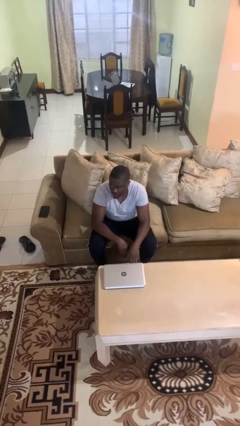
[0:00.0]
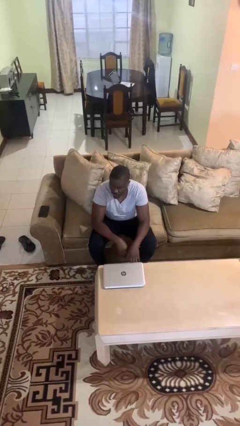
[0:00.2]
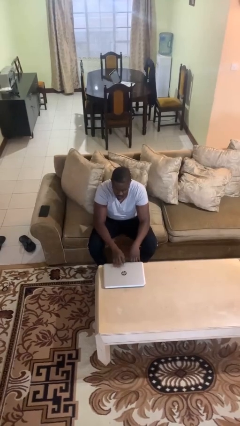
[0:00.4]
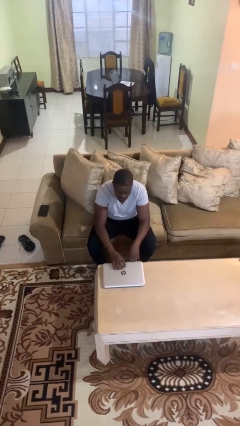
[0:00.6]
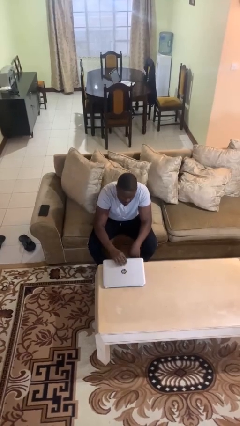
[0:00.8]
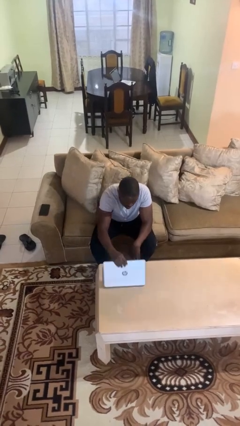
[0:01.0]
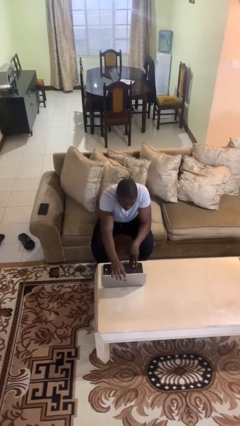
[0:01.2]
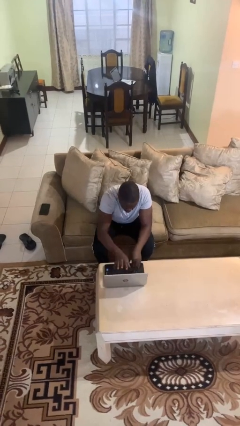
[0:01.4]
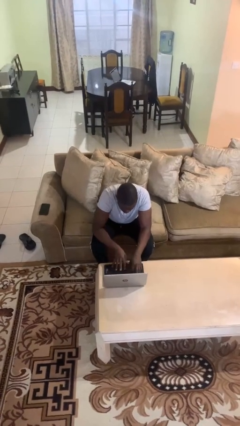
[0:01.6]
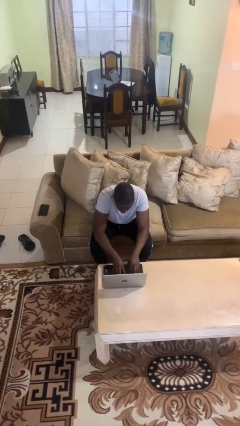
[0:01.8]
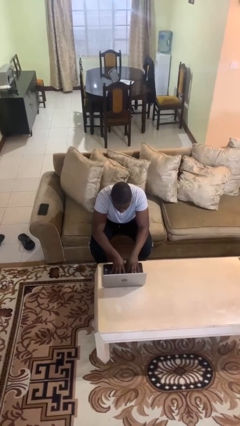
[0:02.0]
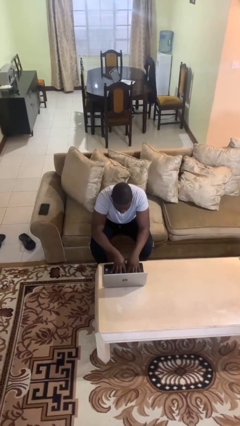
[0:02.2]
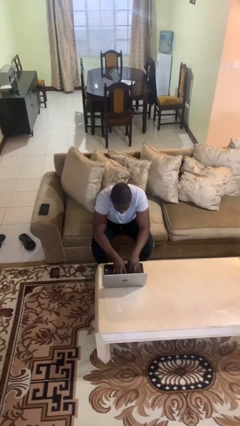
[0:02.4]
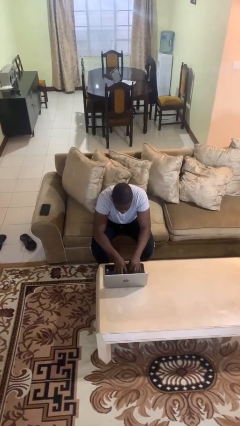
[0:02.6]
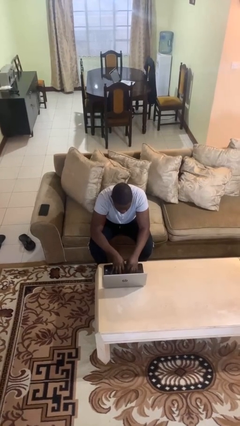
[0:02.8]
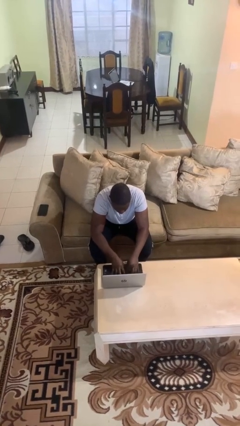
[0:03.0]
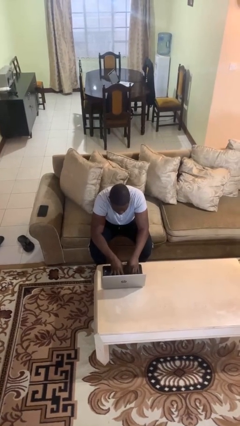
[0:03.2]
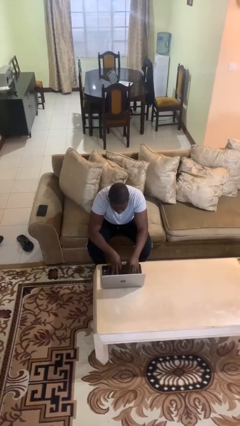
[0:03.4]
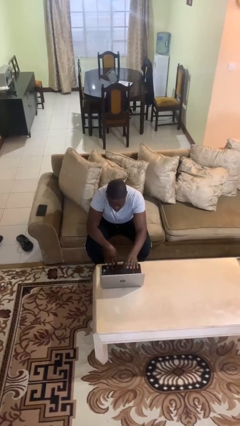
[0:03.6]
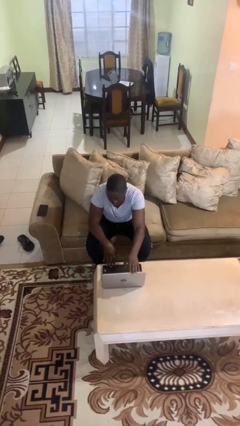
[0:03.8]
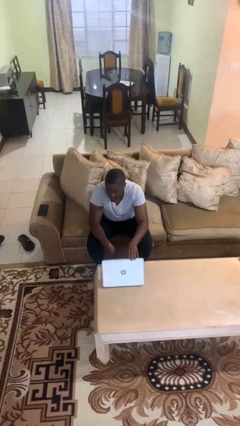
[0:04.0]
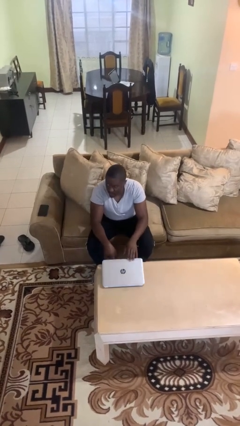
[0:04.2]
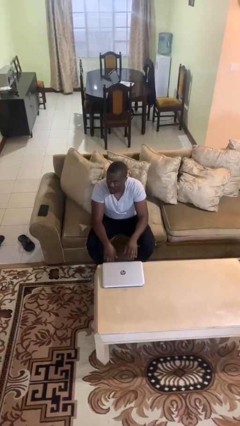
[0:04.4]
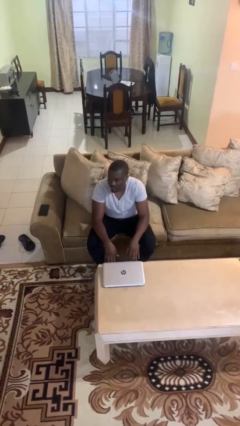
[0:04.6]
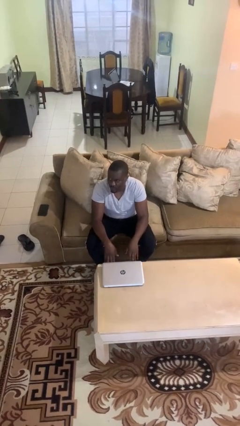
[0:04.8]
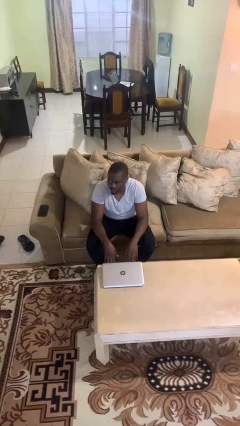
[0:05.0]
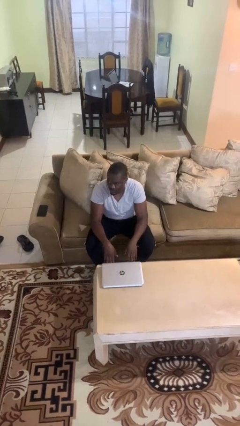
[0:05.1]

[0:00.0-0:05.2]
person interacts with laptop

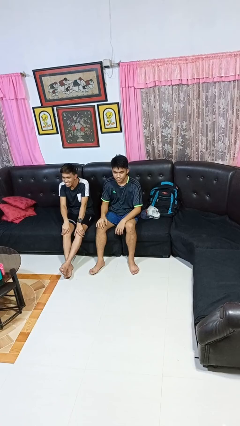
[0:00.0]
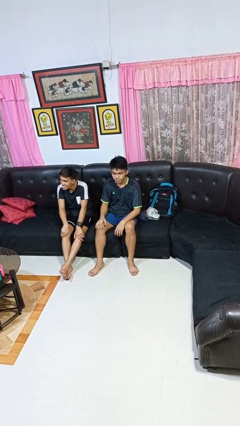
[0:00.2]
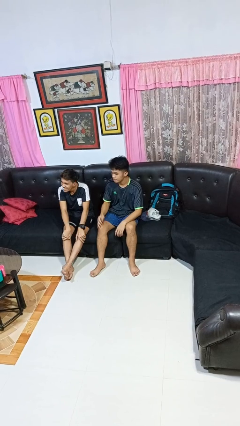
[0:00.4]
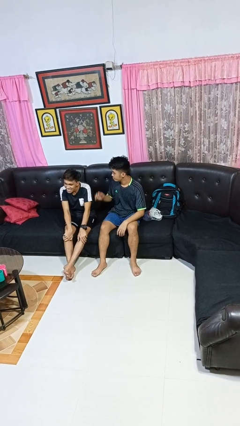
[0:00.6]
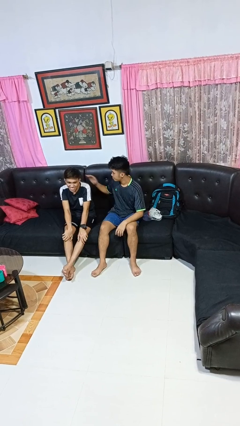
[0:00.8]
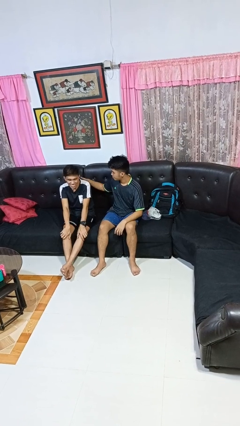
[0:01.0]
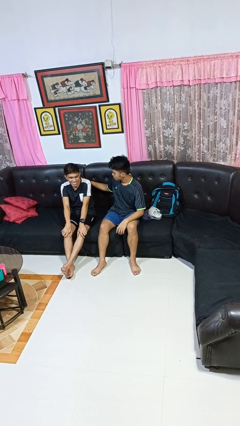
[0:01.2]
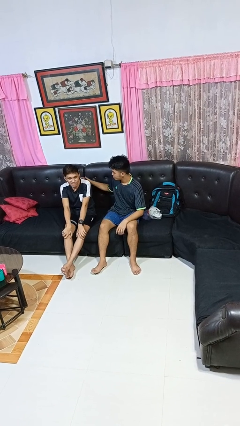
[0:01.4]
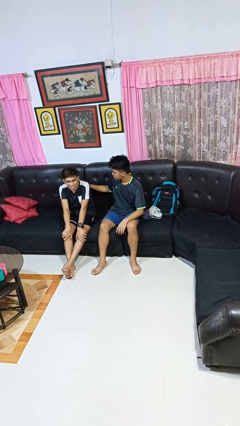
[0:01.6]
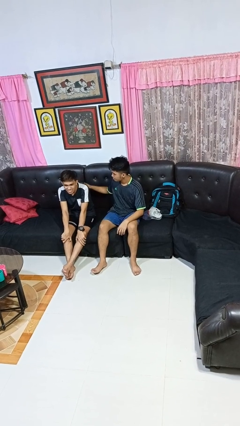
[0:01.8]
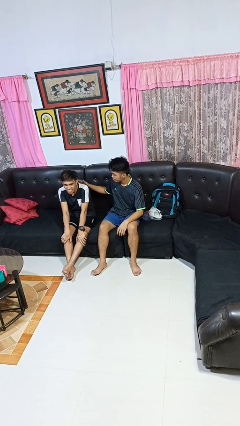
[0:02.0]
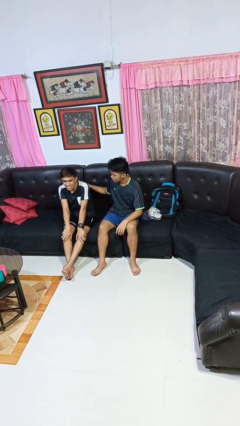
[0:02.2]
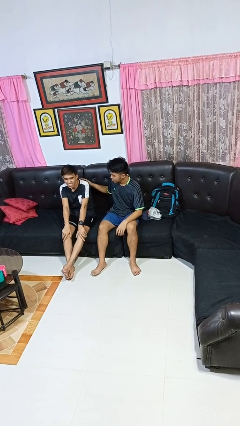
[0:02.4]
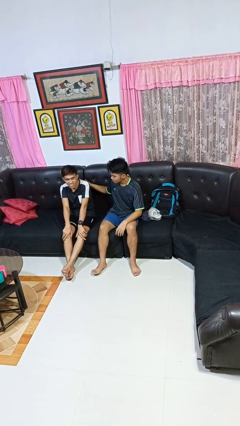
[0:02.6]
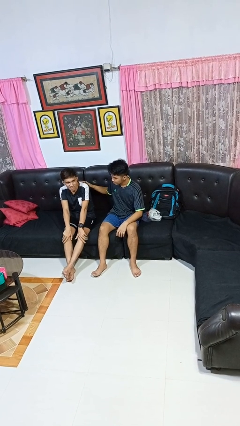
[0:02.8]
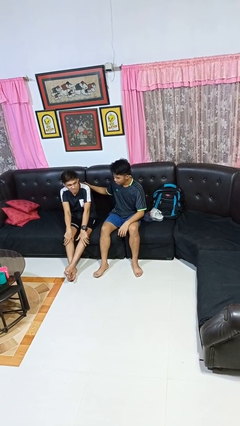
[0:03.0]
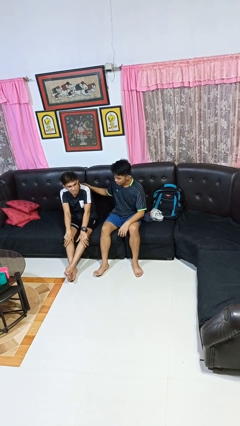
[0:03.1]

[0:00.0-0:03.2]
person touches back of person

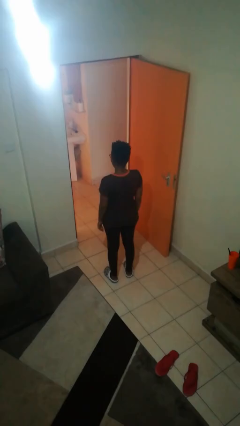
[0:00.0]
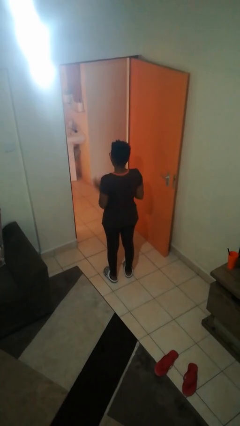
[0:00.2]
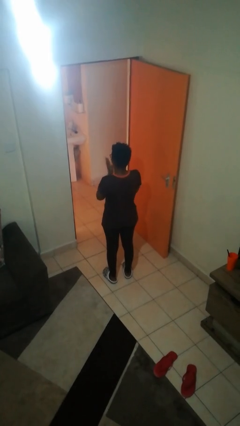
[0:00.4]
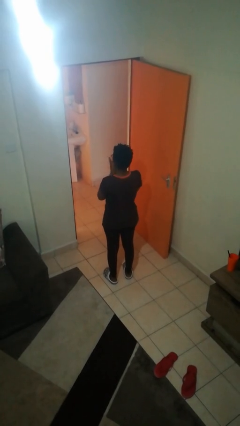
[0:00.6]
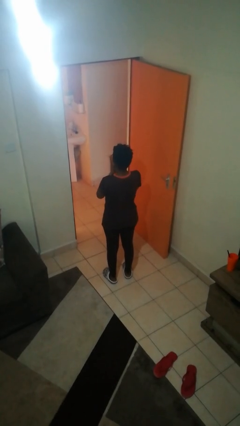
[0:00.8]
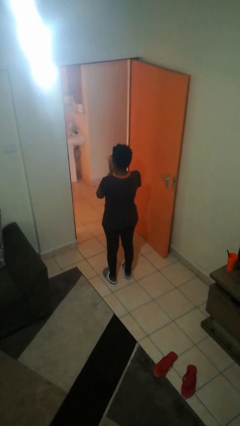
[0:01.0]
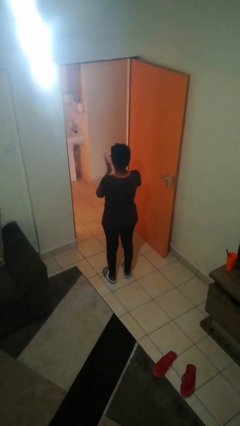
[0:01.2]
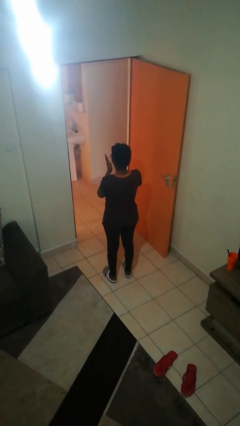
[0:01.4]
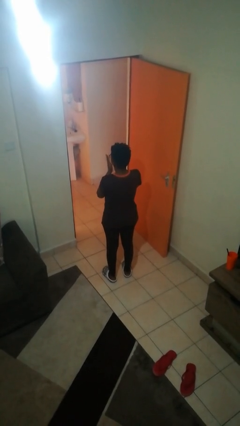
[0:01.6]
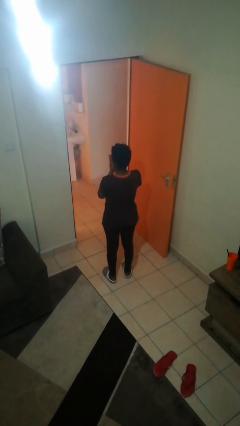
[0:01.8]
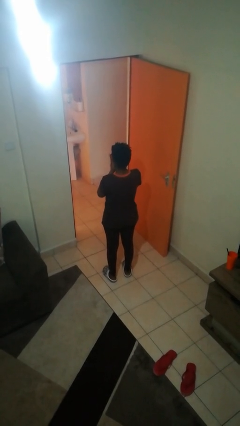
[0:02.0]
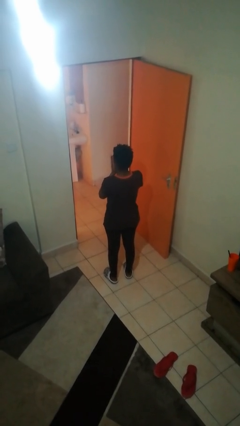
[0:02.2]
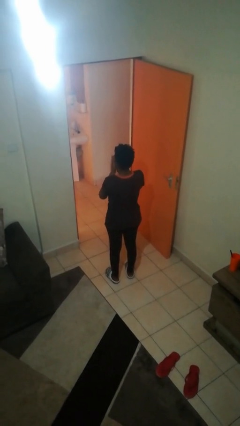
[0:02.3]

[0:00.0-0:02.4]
person claps hands

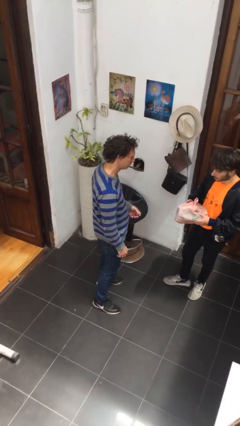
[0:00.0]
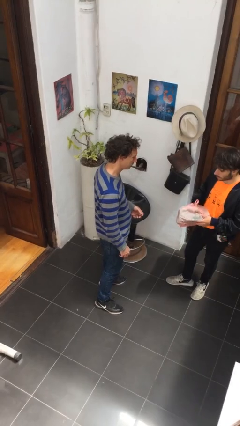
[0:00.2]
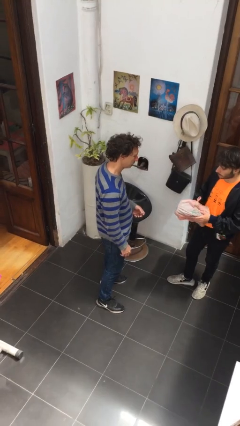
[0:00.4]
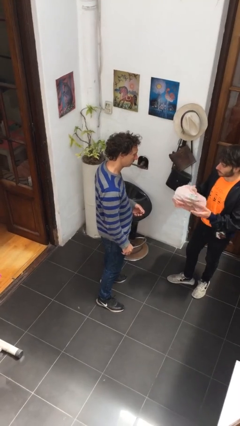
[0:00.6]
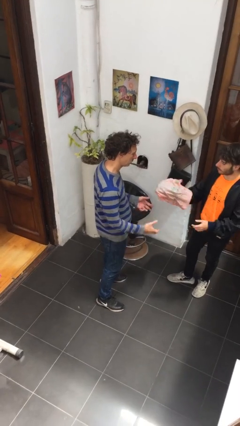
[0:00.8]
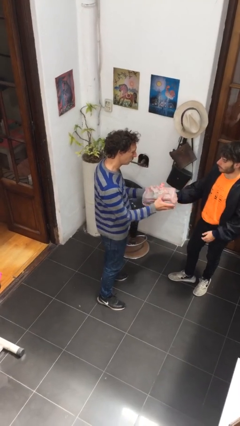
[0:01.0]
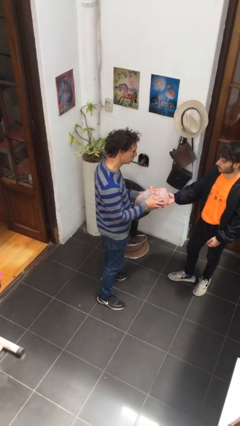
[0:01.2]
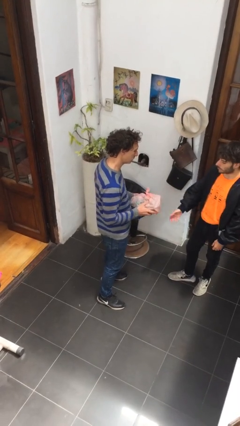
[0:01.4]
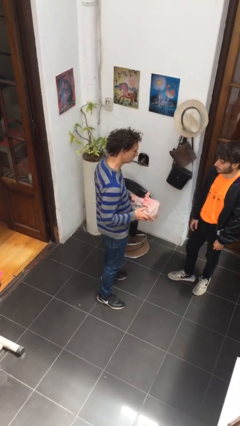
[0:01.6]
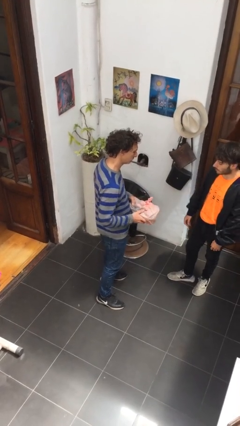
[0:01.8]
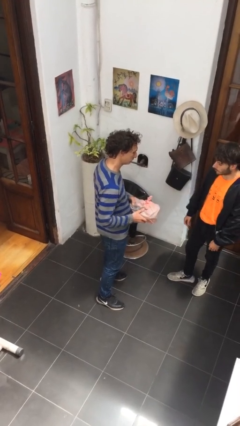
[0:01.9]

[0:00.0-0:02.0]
person transfers object to person

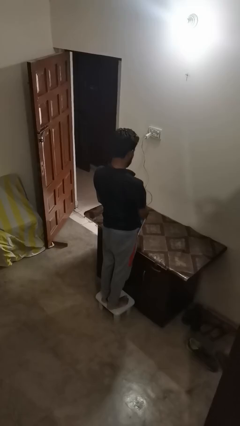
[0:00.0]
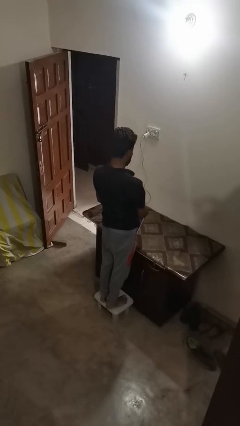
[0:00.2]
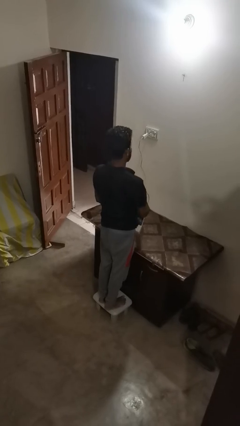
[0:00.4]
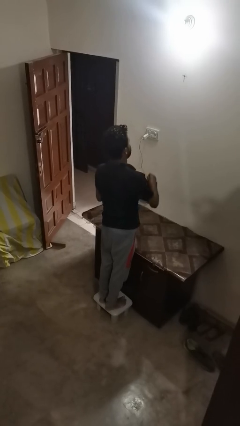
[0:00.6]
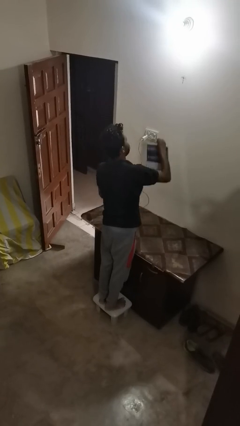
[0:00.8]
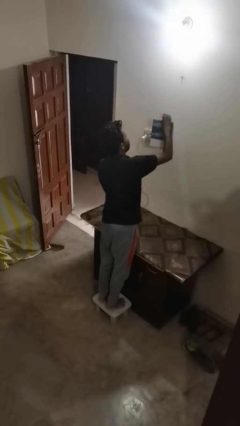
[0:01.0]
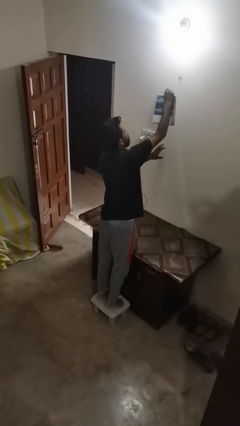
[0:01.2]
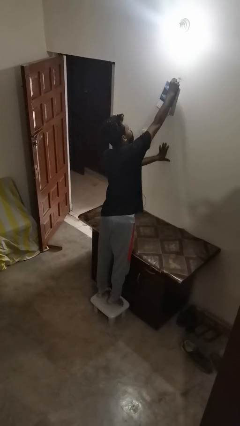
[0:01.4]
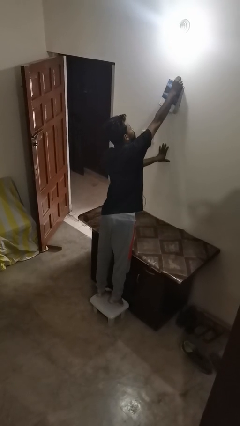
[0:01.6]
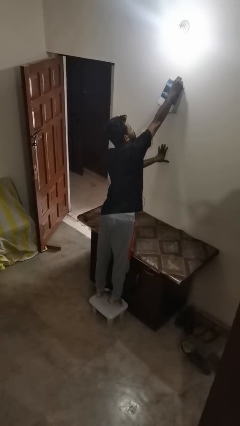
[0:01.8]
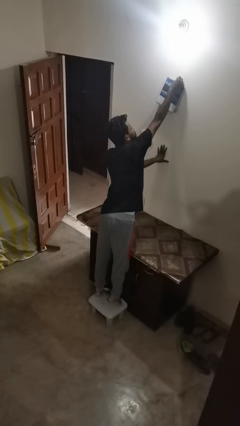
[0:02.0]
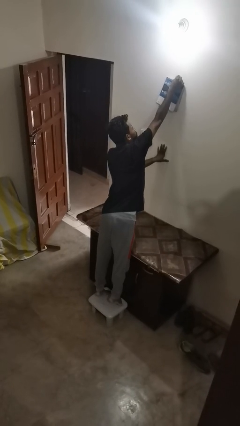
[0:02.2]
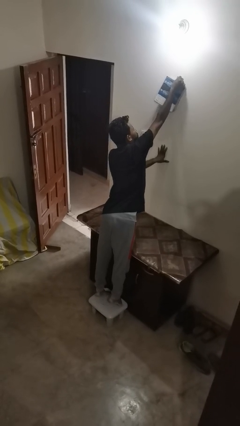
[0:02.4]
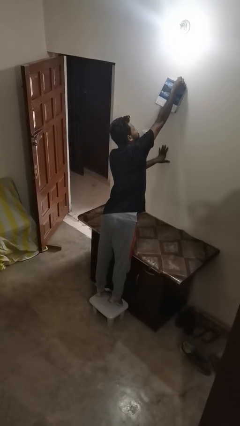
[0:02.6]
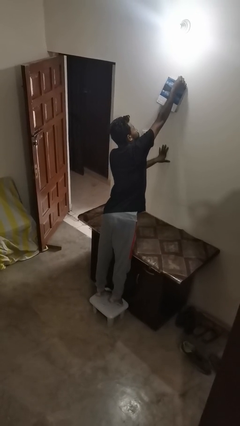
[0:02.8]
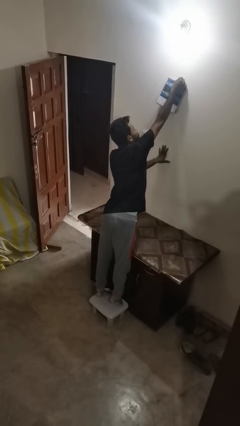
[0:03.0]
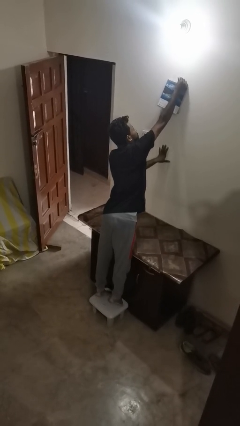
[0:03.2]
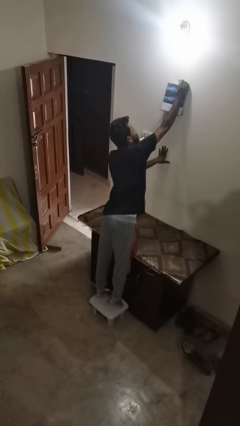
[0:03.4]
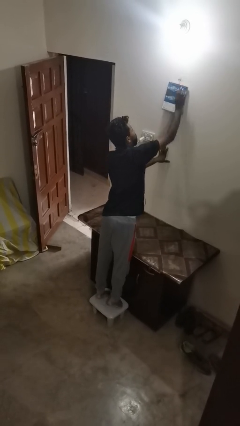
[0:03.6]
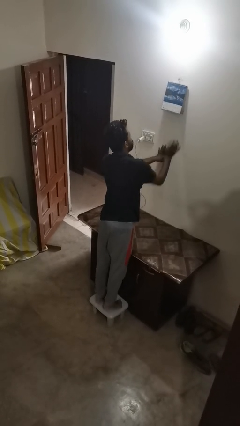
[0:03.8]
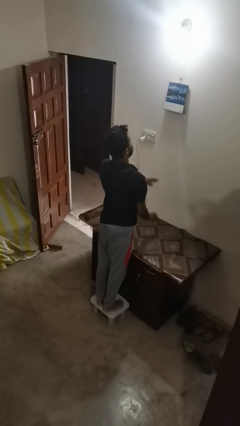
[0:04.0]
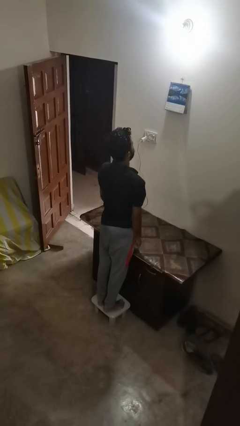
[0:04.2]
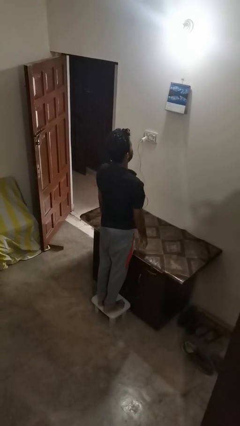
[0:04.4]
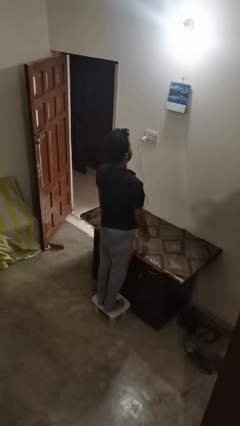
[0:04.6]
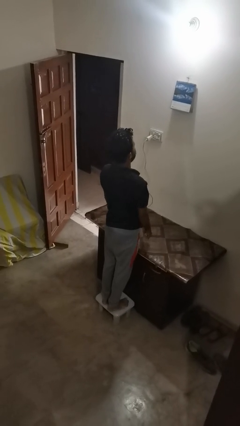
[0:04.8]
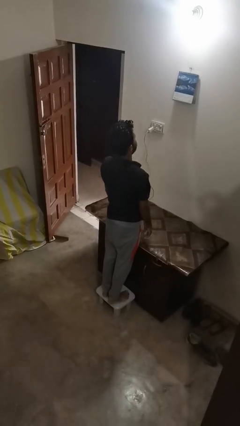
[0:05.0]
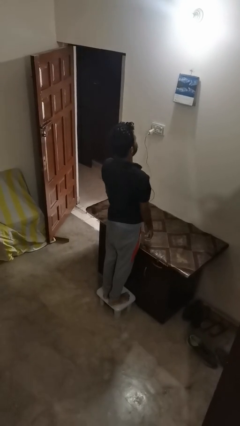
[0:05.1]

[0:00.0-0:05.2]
person puts up picture frame
